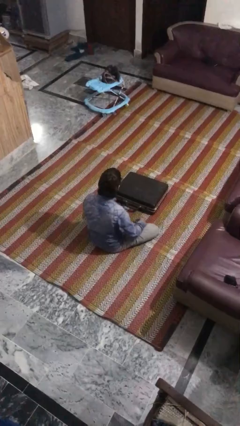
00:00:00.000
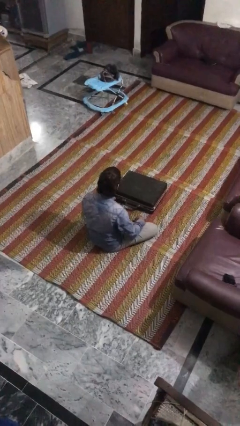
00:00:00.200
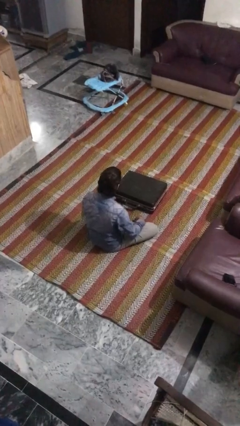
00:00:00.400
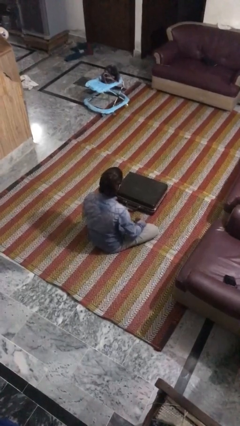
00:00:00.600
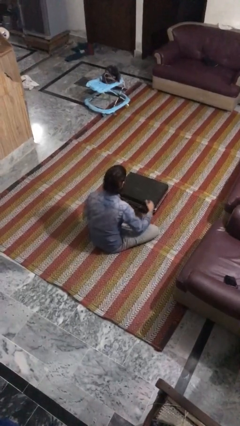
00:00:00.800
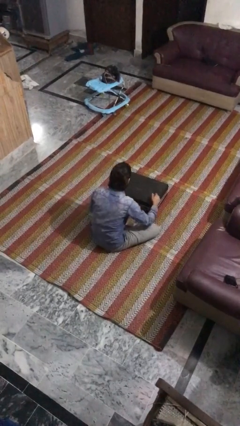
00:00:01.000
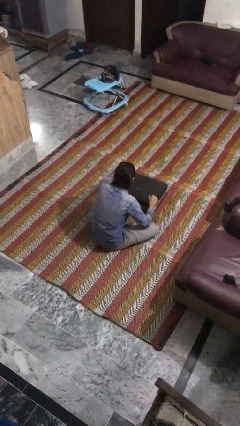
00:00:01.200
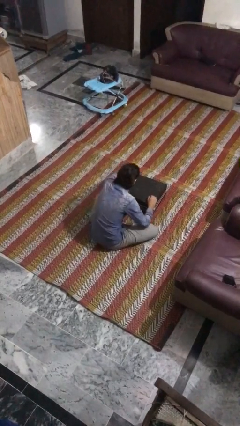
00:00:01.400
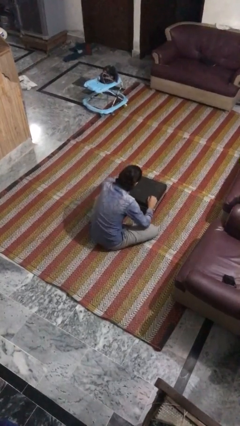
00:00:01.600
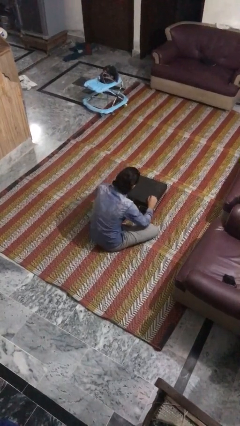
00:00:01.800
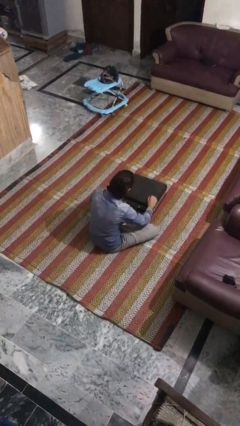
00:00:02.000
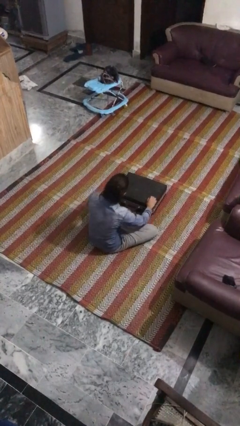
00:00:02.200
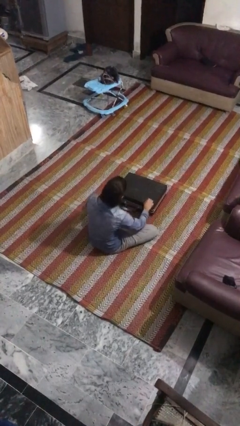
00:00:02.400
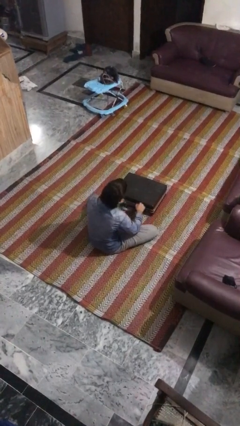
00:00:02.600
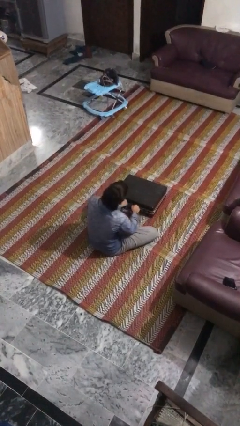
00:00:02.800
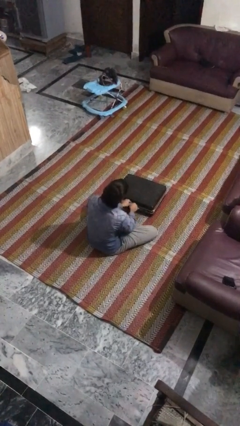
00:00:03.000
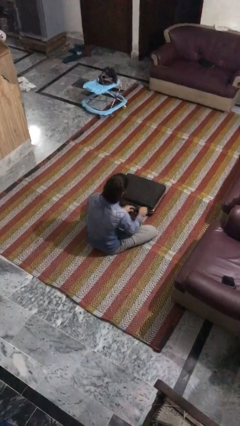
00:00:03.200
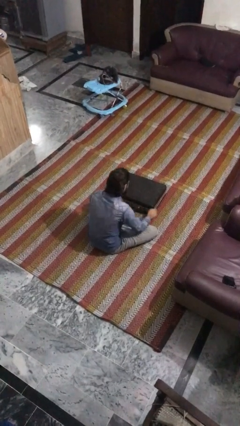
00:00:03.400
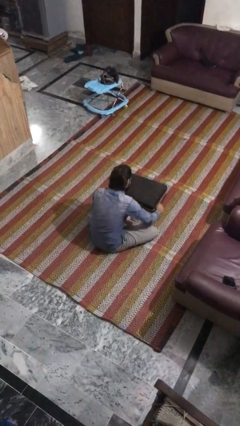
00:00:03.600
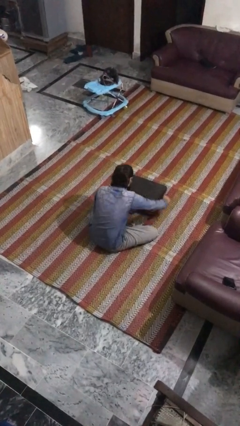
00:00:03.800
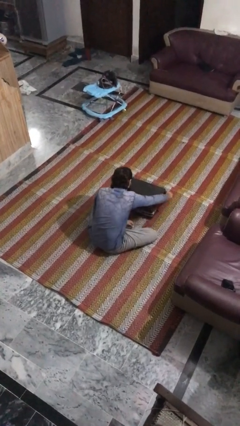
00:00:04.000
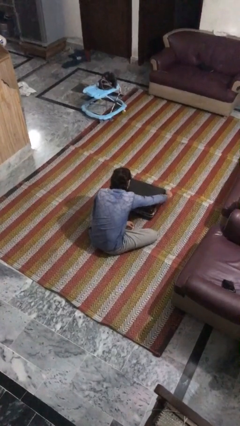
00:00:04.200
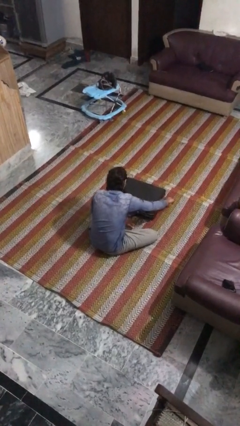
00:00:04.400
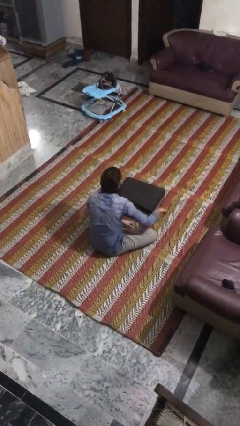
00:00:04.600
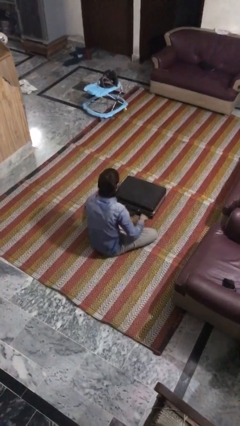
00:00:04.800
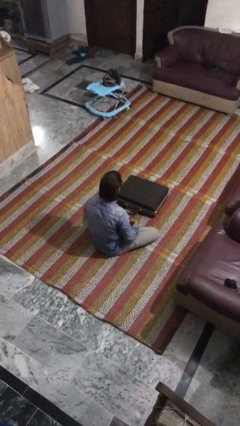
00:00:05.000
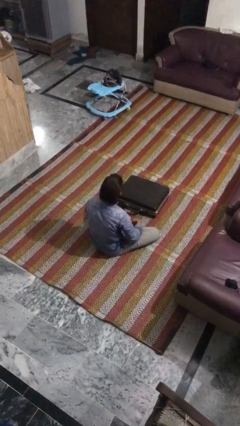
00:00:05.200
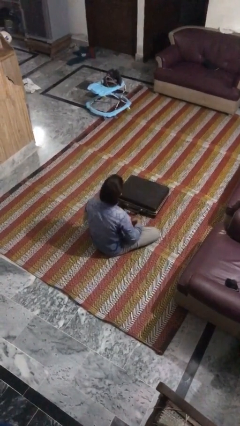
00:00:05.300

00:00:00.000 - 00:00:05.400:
person closes suitcase

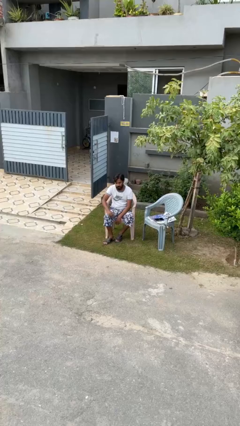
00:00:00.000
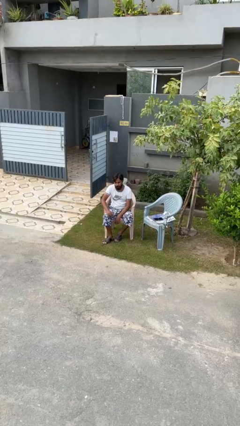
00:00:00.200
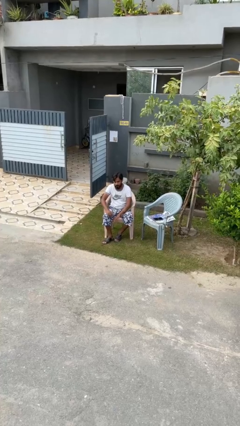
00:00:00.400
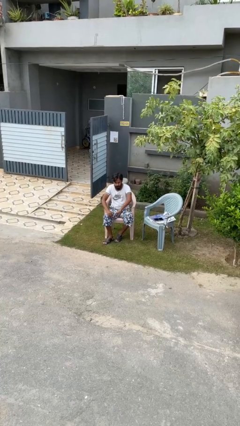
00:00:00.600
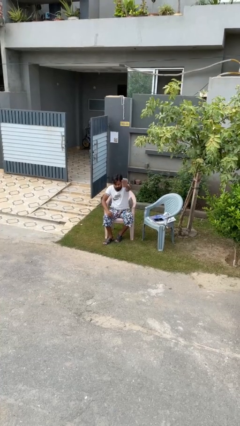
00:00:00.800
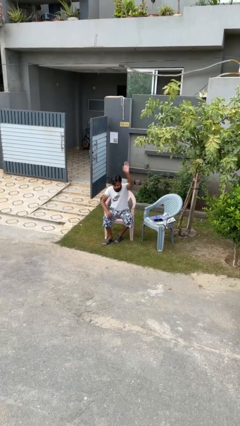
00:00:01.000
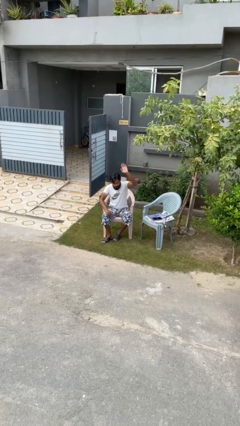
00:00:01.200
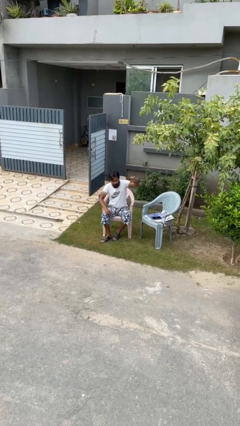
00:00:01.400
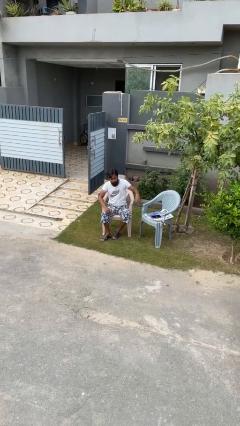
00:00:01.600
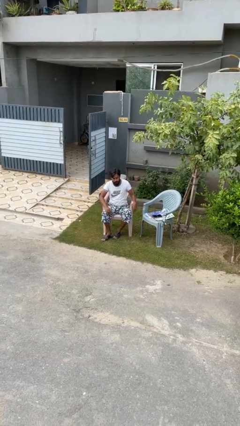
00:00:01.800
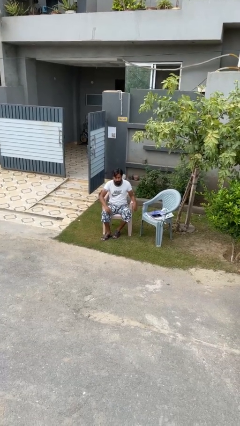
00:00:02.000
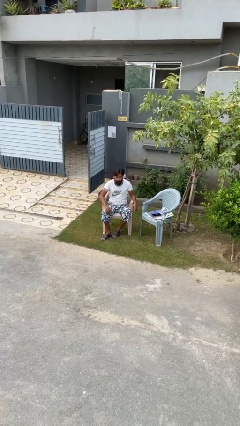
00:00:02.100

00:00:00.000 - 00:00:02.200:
person gestures swipe up

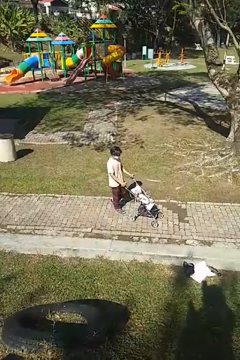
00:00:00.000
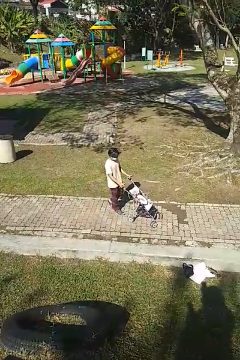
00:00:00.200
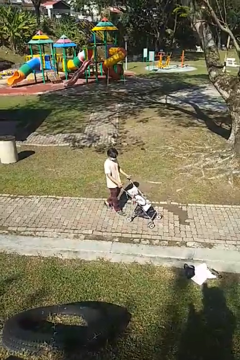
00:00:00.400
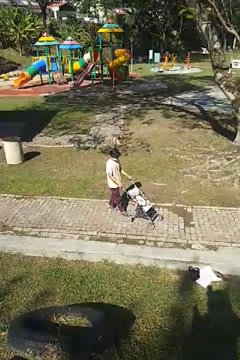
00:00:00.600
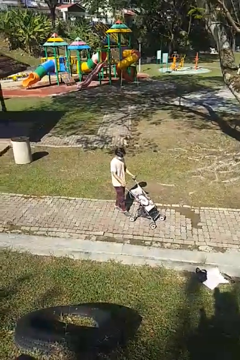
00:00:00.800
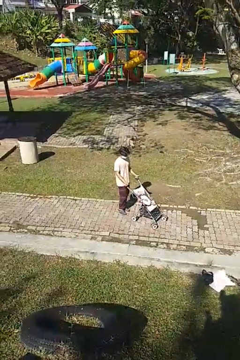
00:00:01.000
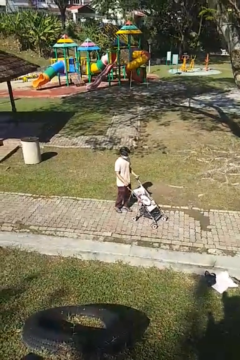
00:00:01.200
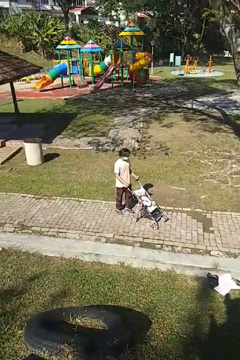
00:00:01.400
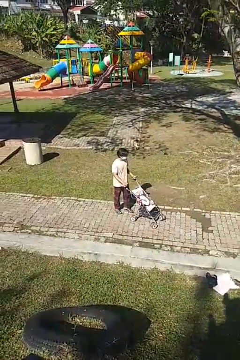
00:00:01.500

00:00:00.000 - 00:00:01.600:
person pulls wheeled cart

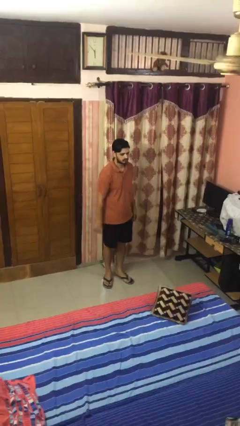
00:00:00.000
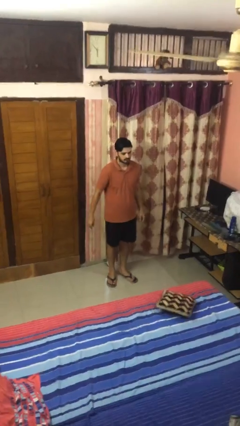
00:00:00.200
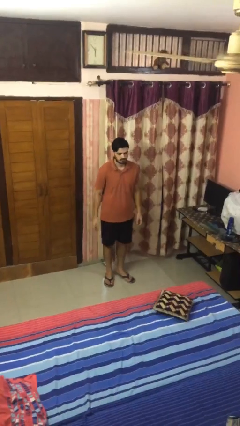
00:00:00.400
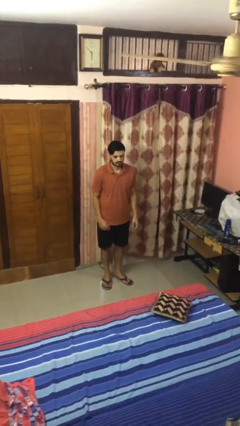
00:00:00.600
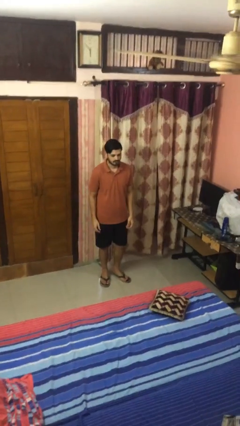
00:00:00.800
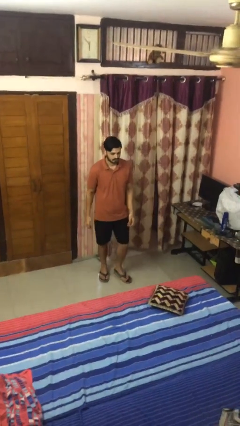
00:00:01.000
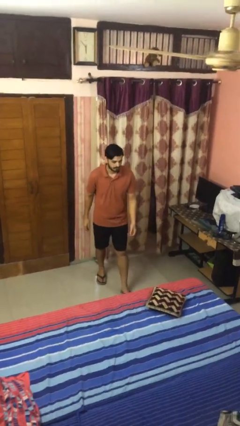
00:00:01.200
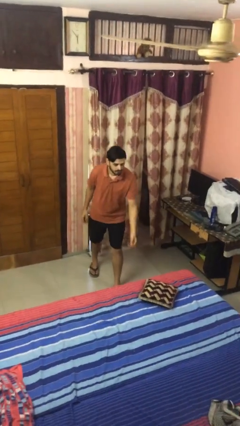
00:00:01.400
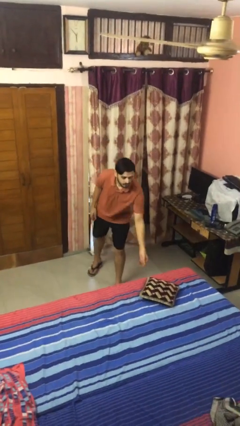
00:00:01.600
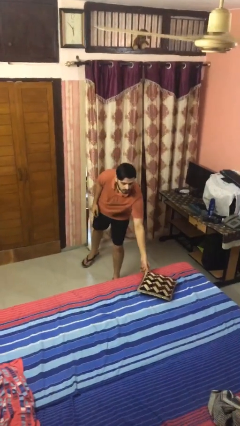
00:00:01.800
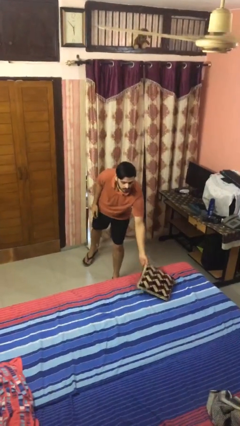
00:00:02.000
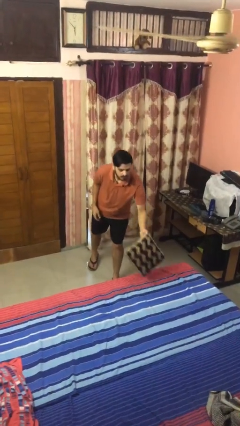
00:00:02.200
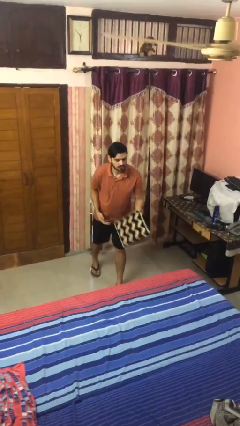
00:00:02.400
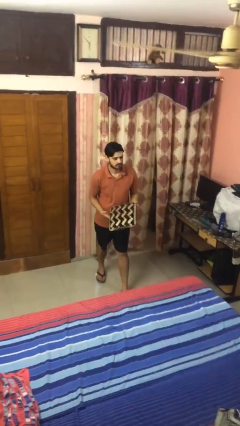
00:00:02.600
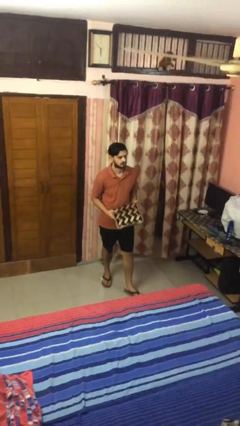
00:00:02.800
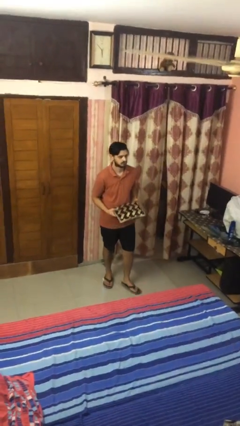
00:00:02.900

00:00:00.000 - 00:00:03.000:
person picks up object from bed

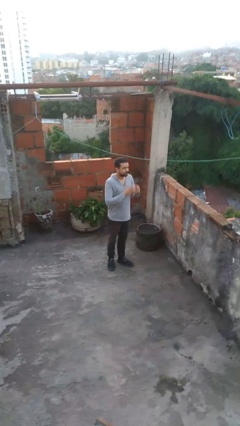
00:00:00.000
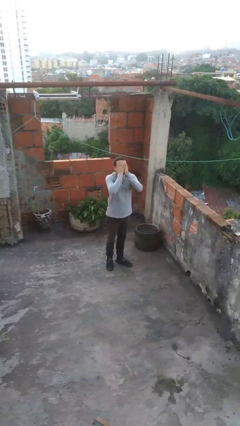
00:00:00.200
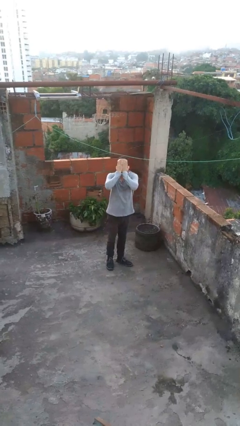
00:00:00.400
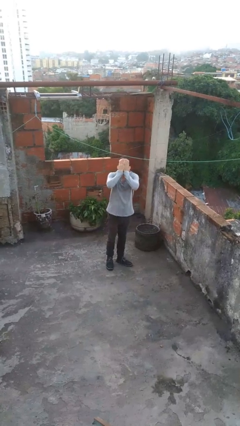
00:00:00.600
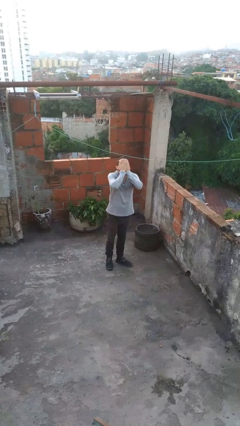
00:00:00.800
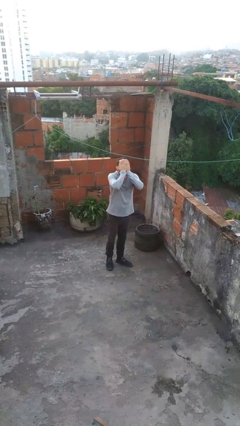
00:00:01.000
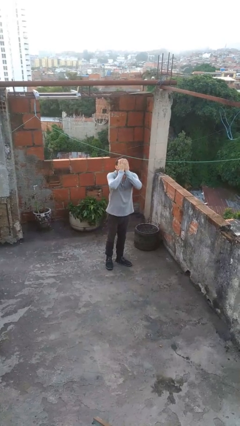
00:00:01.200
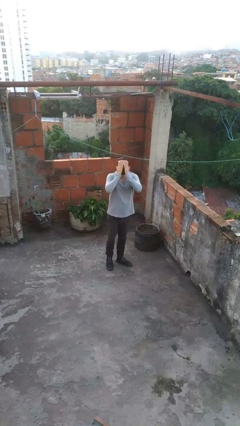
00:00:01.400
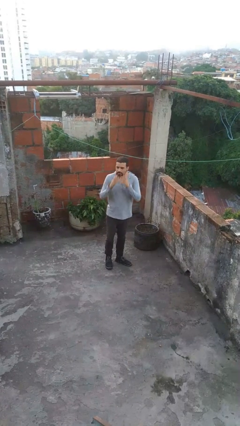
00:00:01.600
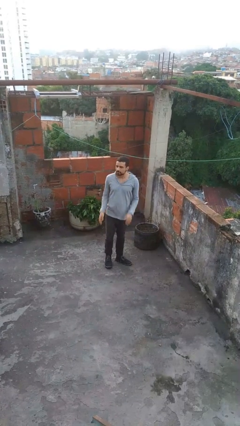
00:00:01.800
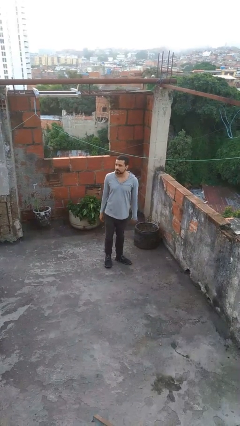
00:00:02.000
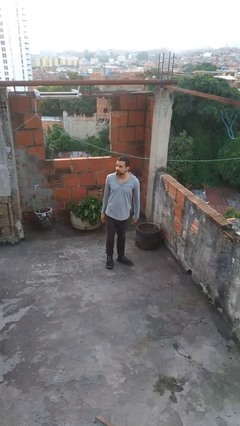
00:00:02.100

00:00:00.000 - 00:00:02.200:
person covers face with hands

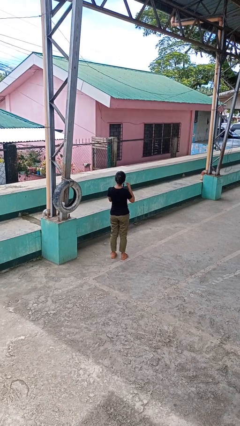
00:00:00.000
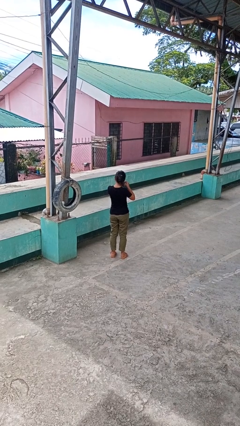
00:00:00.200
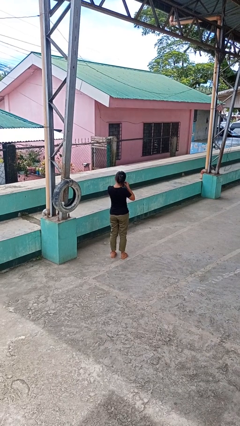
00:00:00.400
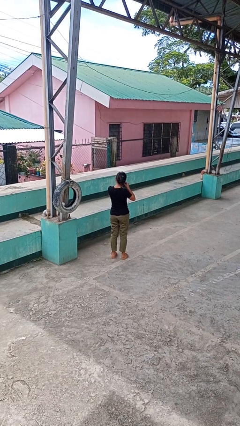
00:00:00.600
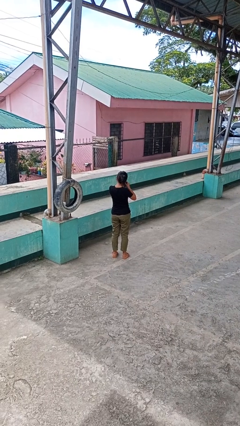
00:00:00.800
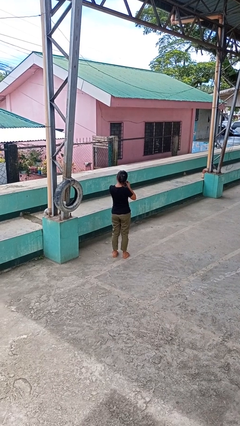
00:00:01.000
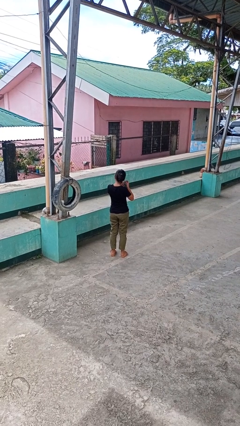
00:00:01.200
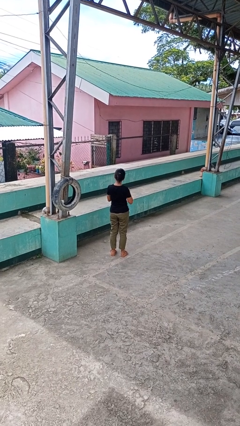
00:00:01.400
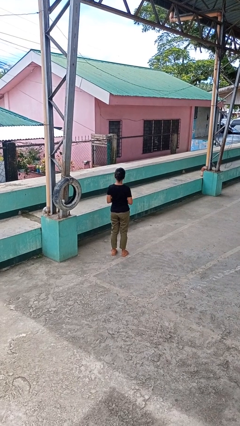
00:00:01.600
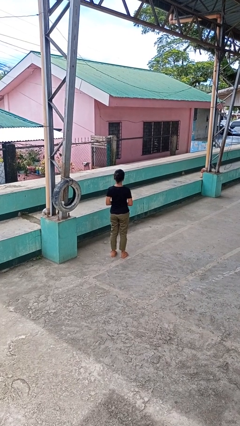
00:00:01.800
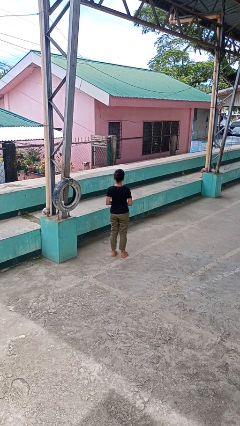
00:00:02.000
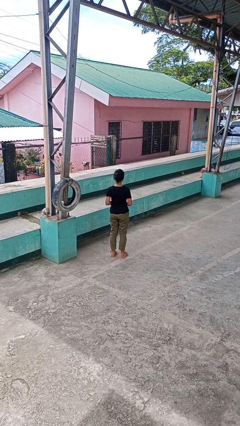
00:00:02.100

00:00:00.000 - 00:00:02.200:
person takes off earrings

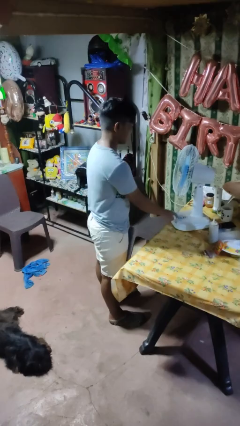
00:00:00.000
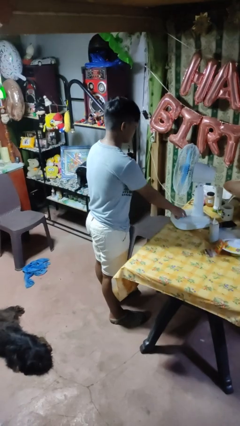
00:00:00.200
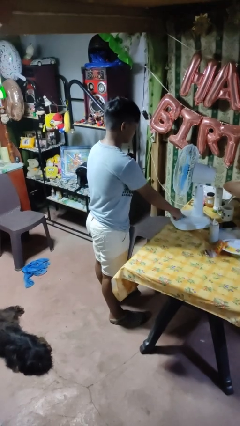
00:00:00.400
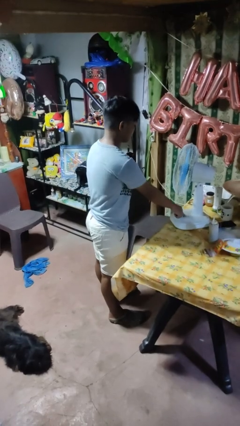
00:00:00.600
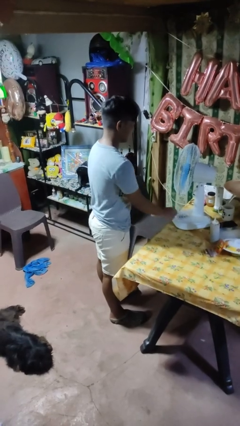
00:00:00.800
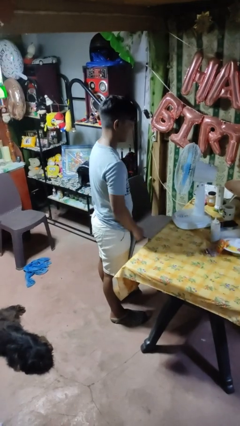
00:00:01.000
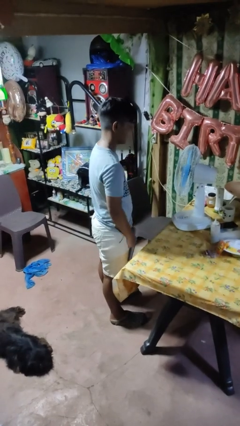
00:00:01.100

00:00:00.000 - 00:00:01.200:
person turns on fan
